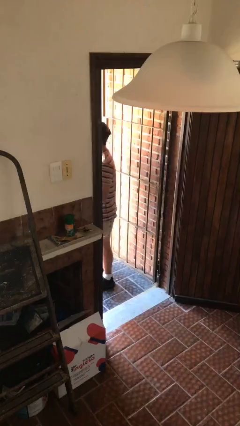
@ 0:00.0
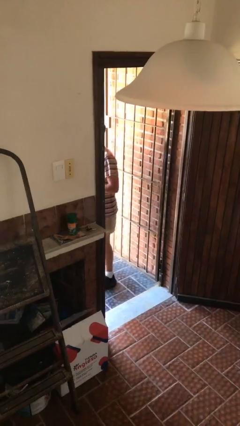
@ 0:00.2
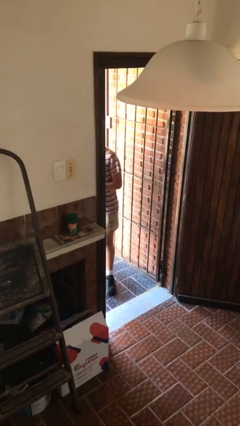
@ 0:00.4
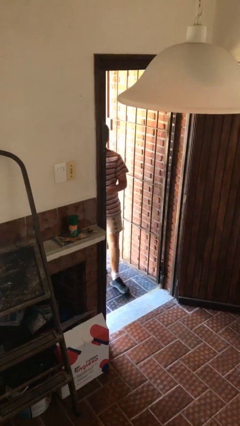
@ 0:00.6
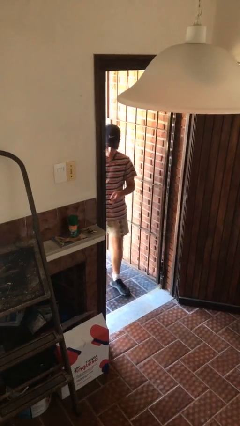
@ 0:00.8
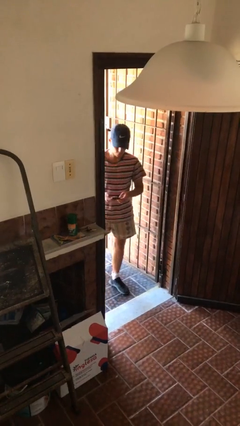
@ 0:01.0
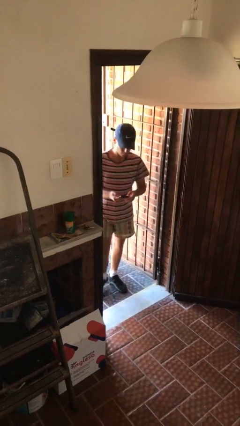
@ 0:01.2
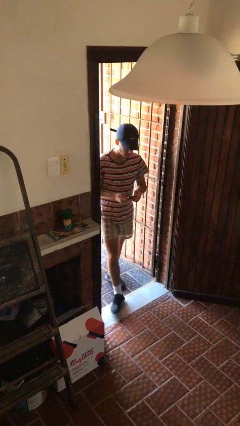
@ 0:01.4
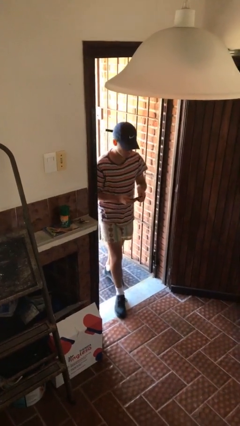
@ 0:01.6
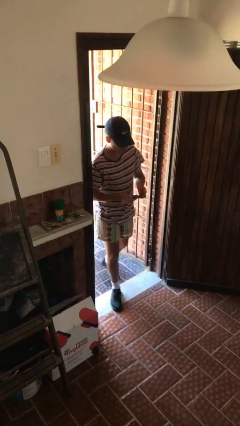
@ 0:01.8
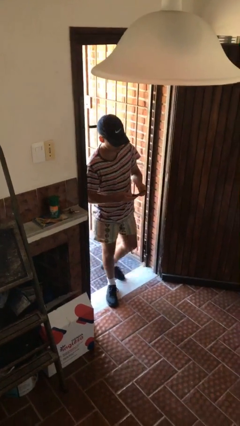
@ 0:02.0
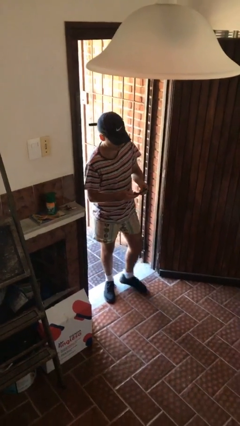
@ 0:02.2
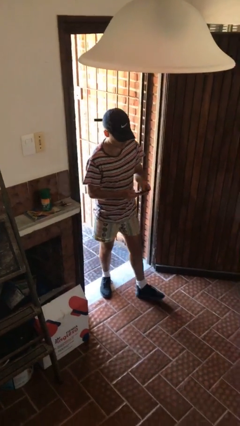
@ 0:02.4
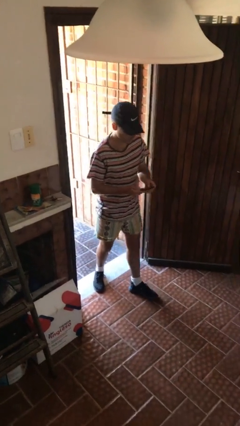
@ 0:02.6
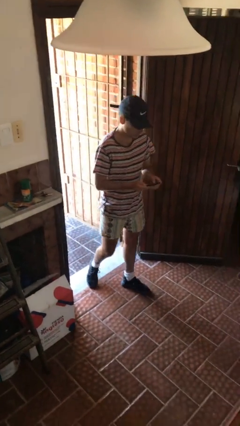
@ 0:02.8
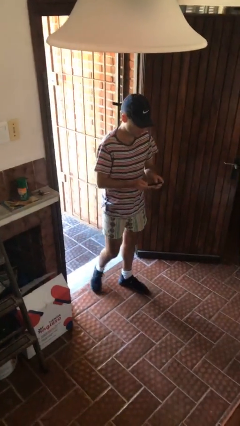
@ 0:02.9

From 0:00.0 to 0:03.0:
person enters scene through structure

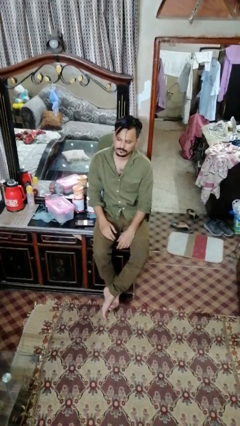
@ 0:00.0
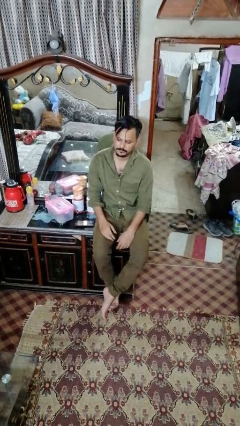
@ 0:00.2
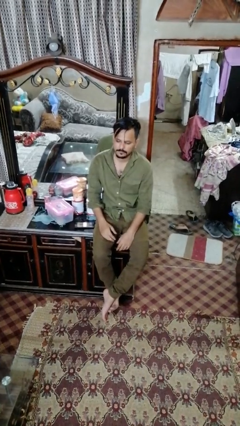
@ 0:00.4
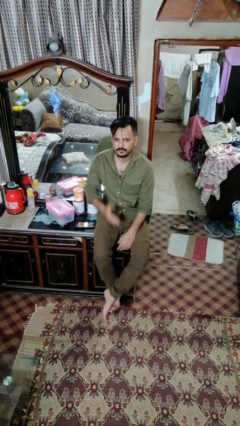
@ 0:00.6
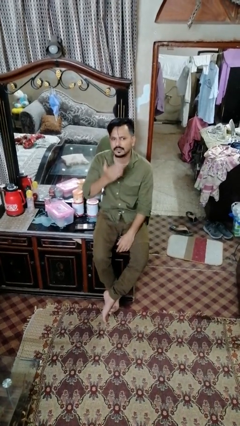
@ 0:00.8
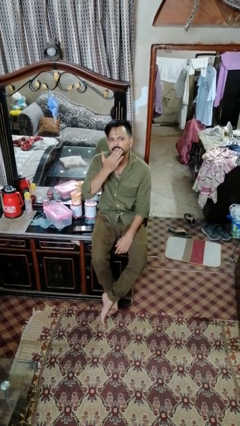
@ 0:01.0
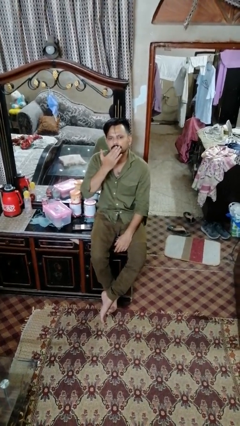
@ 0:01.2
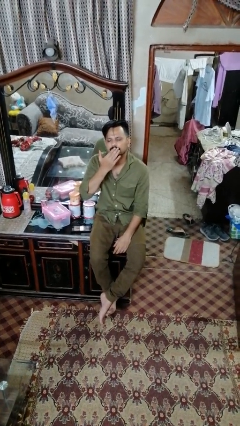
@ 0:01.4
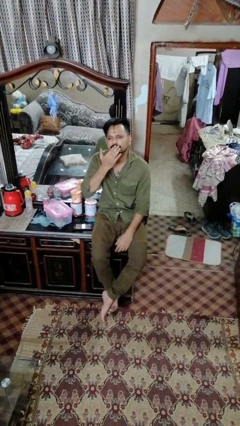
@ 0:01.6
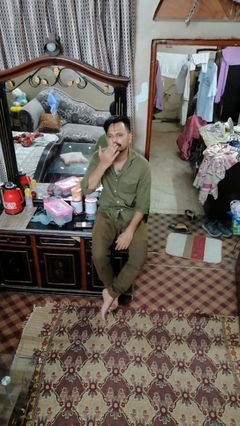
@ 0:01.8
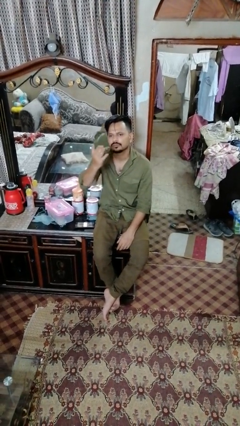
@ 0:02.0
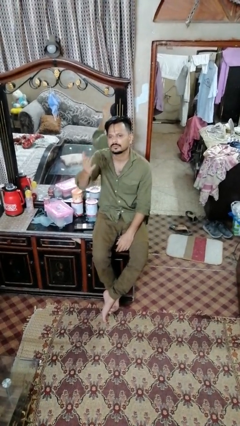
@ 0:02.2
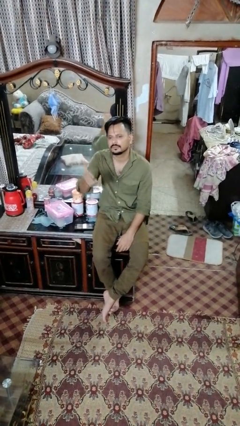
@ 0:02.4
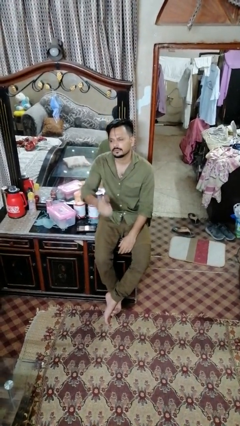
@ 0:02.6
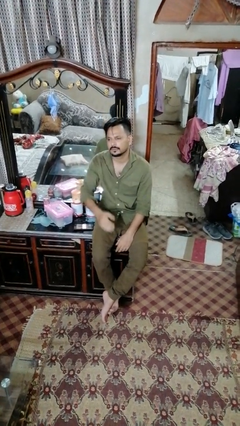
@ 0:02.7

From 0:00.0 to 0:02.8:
person gestures blow kiss

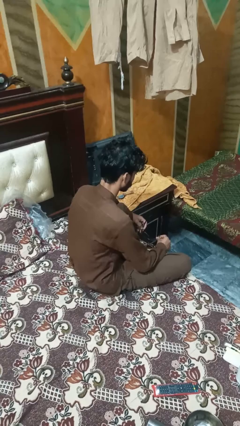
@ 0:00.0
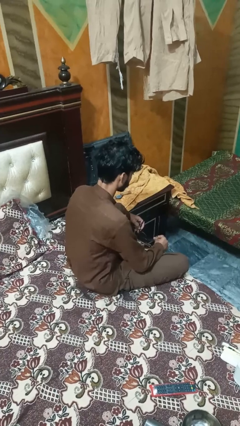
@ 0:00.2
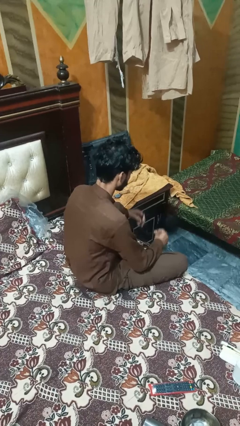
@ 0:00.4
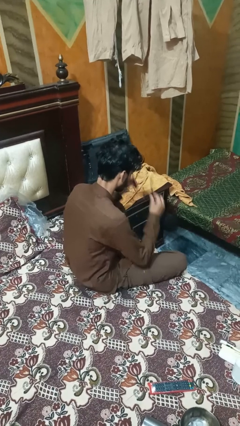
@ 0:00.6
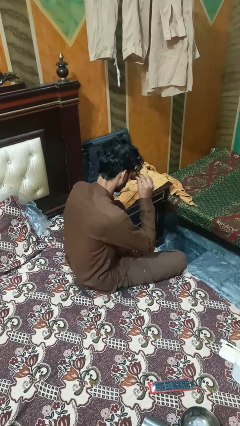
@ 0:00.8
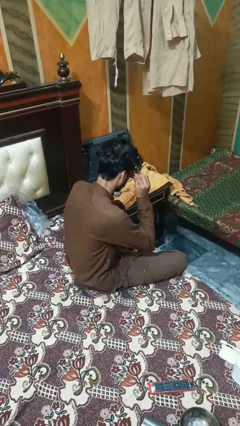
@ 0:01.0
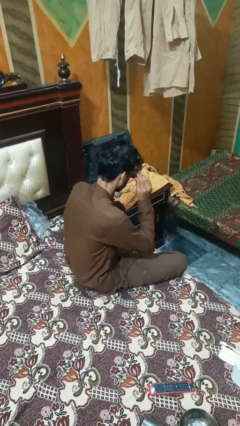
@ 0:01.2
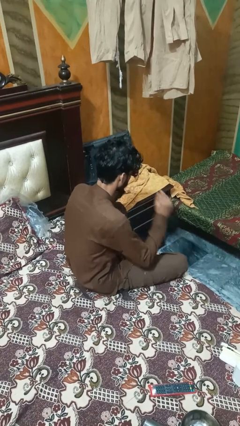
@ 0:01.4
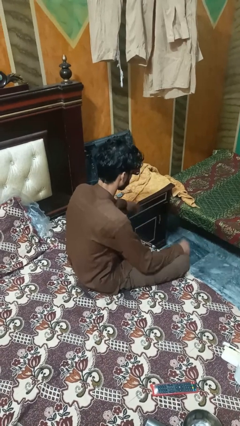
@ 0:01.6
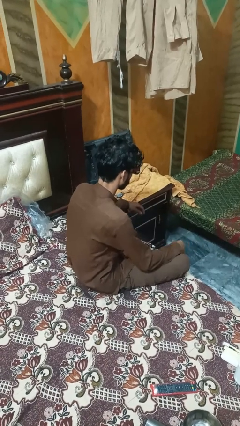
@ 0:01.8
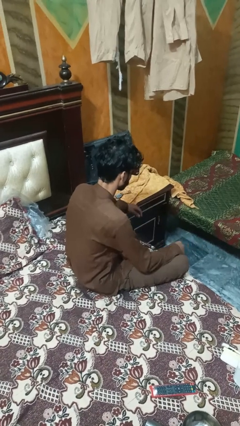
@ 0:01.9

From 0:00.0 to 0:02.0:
person puts on sunglasses

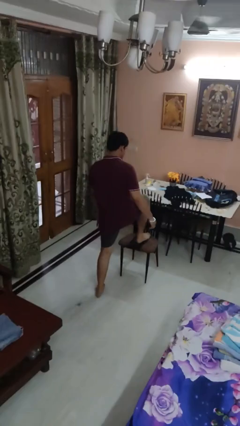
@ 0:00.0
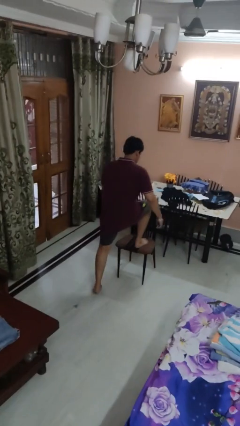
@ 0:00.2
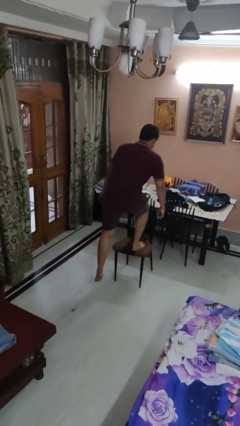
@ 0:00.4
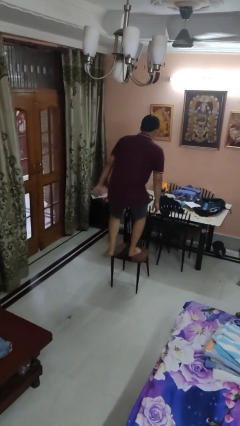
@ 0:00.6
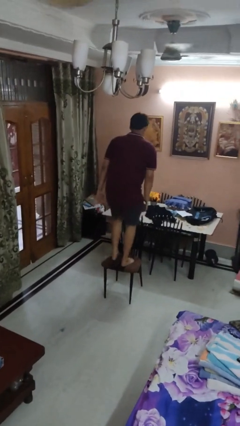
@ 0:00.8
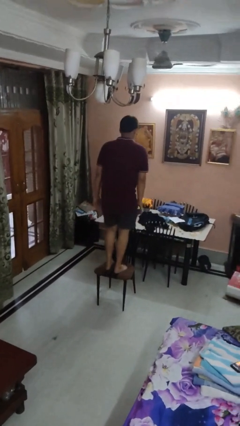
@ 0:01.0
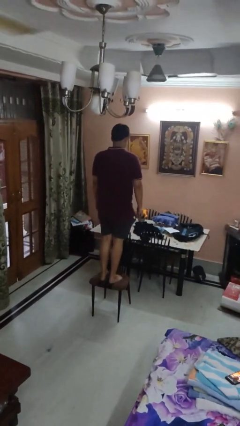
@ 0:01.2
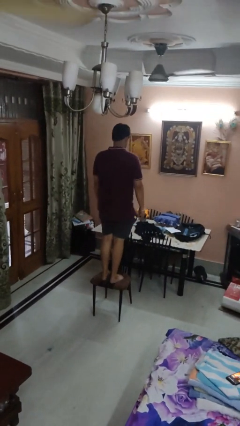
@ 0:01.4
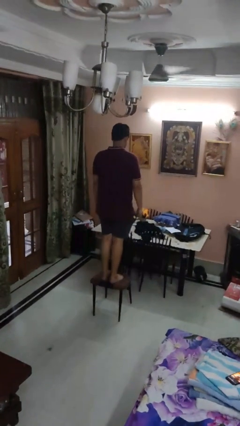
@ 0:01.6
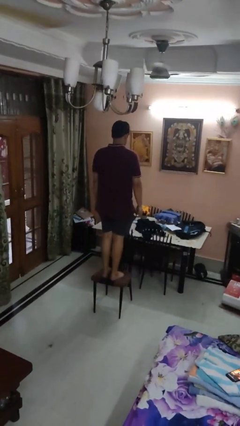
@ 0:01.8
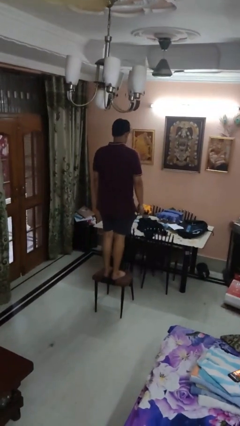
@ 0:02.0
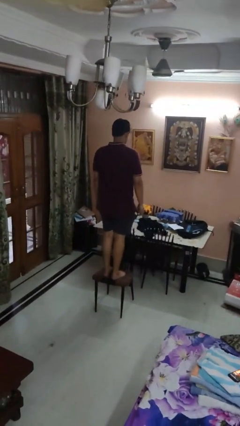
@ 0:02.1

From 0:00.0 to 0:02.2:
person climbs on chair

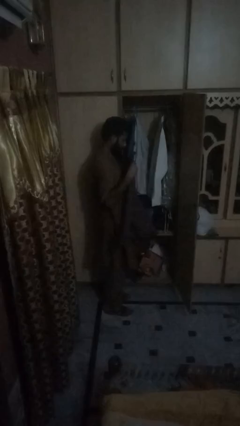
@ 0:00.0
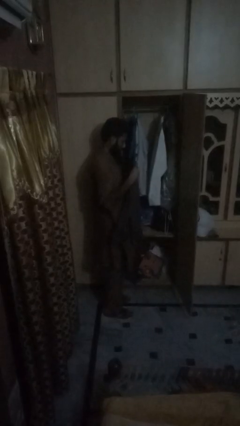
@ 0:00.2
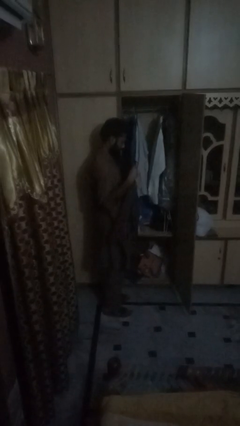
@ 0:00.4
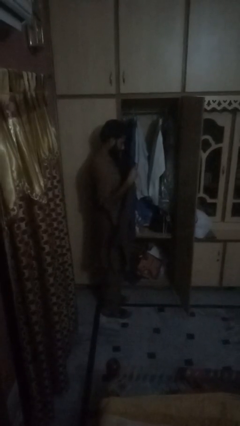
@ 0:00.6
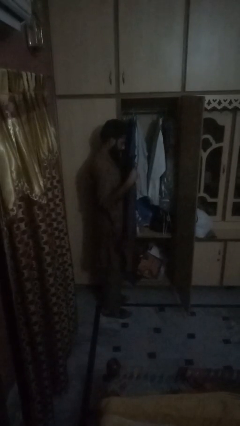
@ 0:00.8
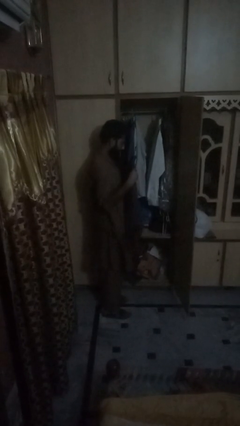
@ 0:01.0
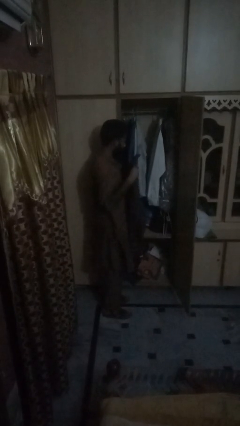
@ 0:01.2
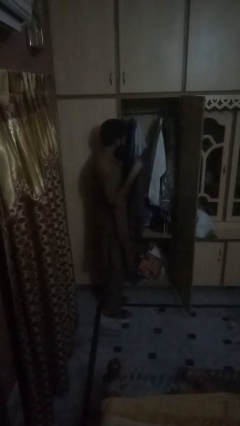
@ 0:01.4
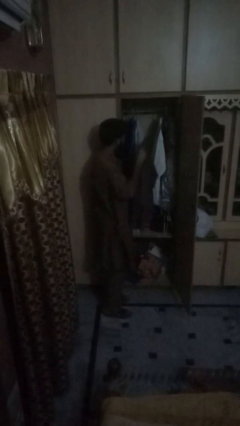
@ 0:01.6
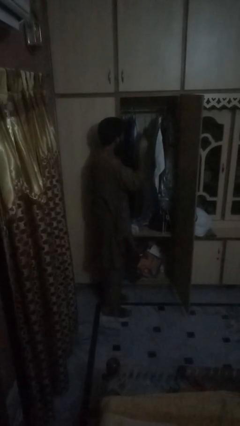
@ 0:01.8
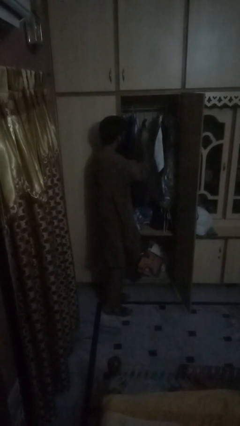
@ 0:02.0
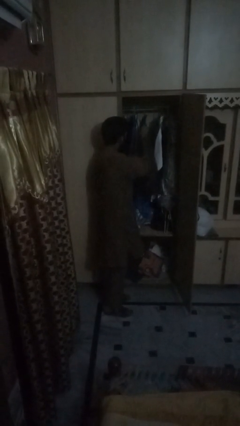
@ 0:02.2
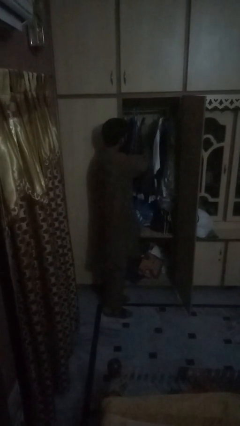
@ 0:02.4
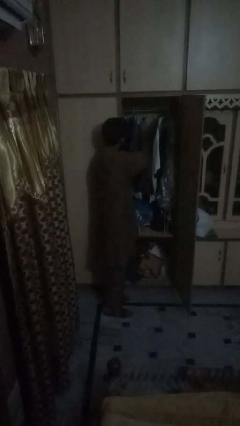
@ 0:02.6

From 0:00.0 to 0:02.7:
person takes clothes from dresser

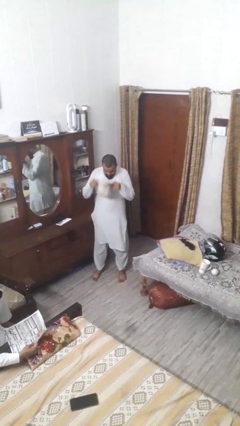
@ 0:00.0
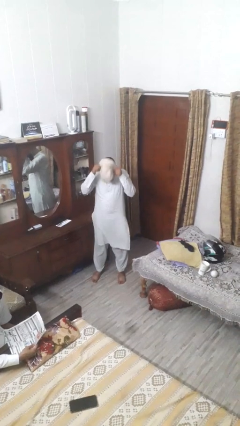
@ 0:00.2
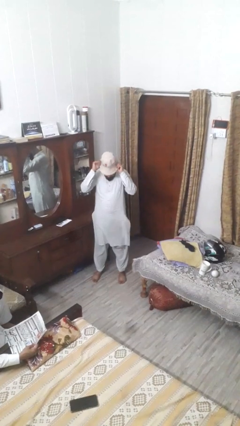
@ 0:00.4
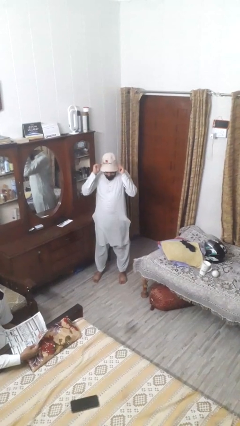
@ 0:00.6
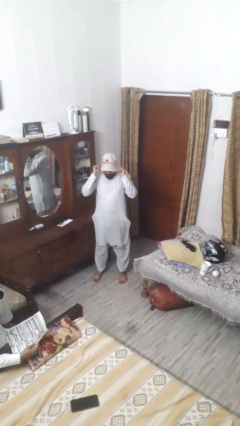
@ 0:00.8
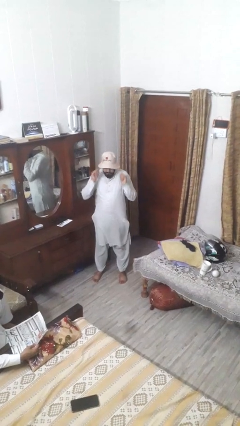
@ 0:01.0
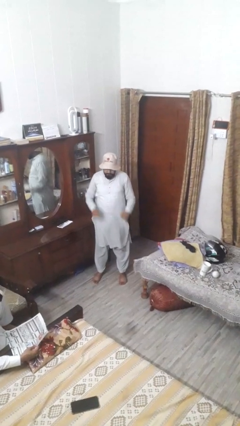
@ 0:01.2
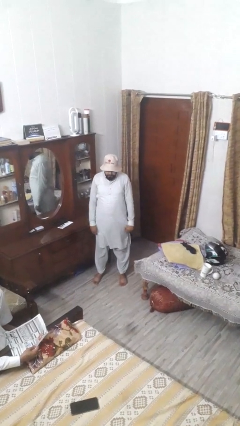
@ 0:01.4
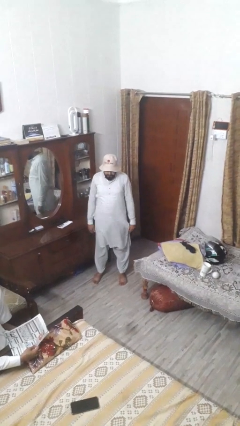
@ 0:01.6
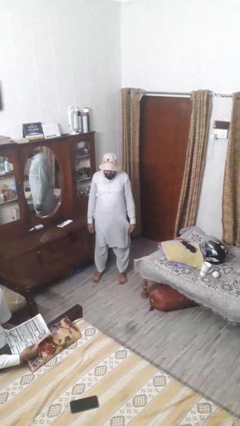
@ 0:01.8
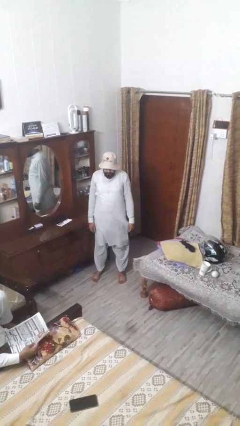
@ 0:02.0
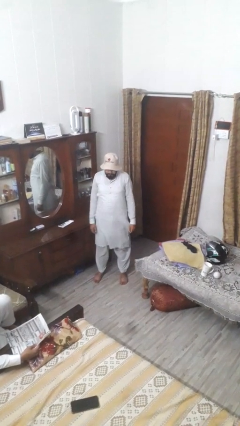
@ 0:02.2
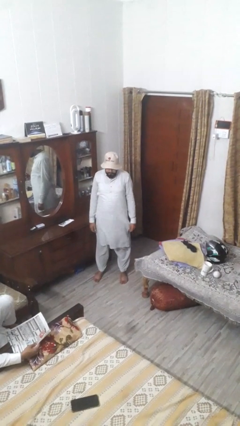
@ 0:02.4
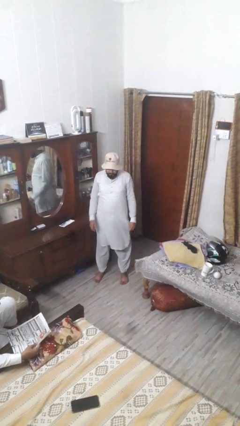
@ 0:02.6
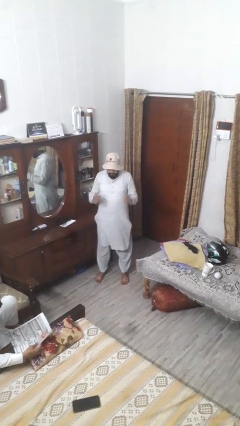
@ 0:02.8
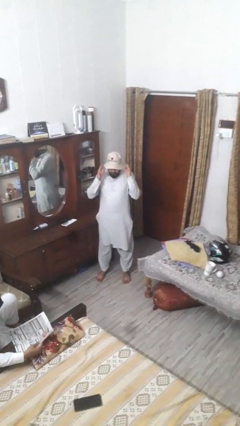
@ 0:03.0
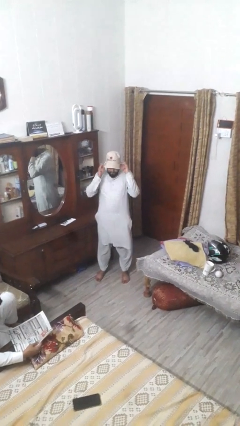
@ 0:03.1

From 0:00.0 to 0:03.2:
person puts on hat

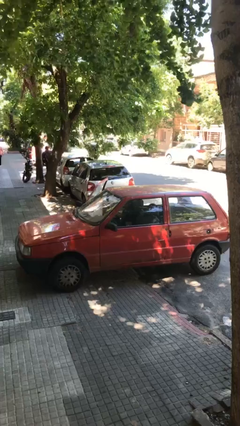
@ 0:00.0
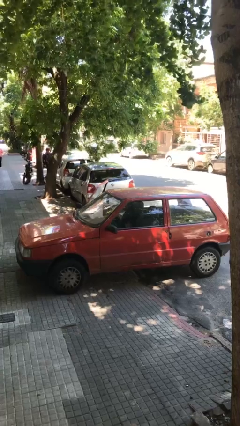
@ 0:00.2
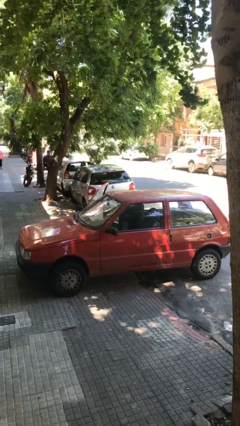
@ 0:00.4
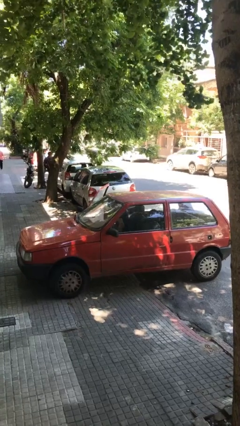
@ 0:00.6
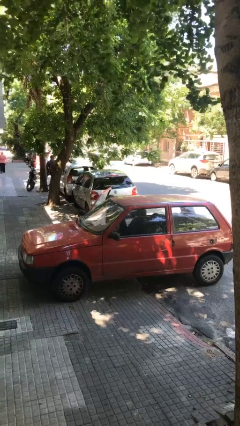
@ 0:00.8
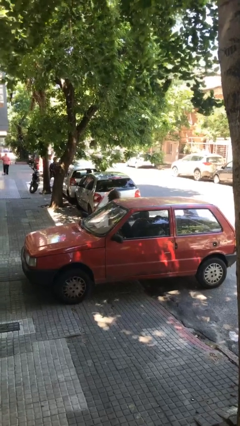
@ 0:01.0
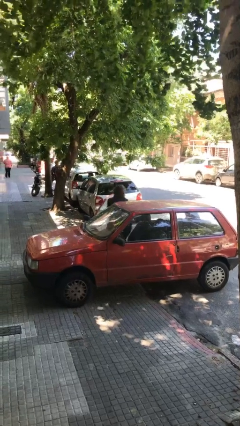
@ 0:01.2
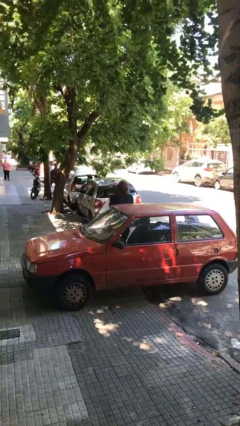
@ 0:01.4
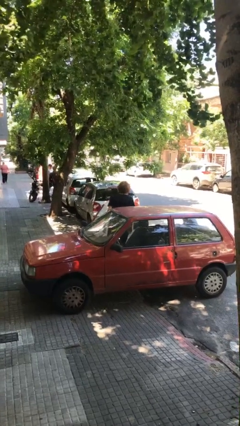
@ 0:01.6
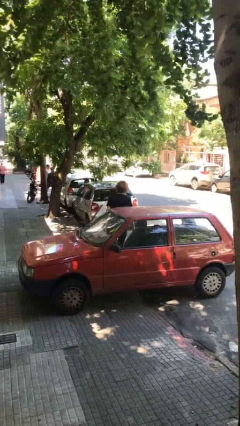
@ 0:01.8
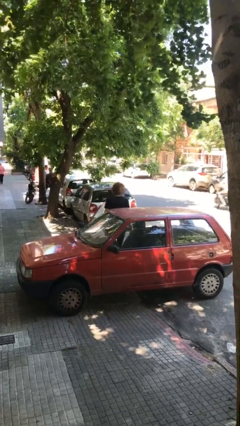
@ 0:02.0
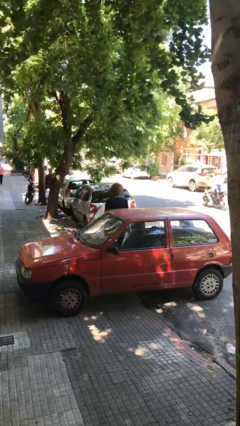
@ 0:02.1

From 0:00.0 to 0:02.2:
person exits car
